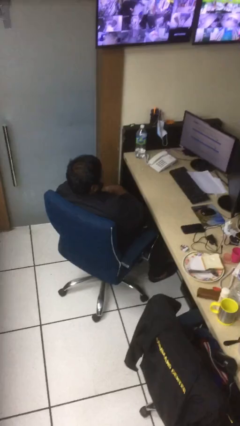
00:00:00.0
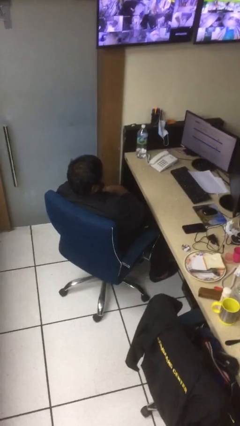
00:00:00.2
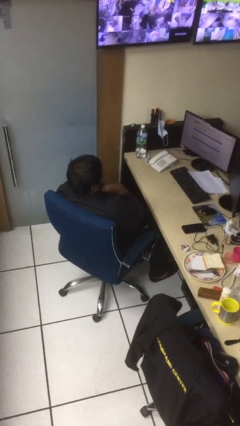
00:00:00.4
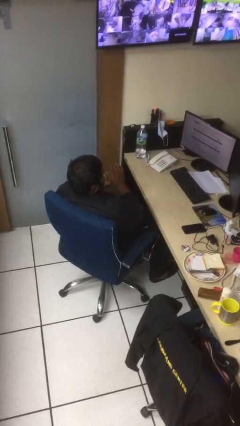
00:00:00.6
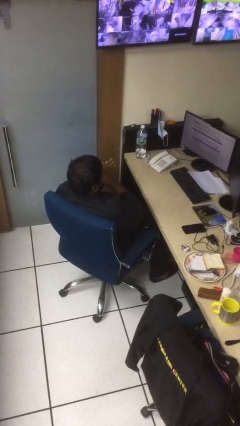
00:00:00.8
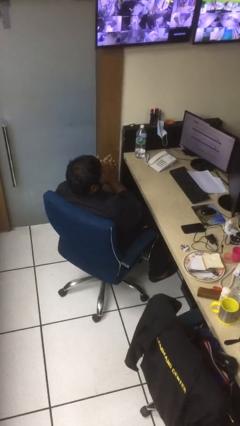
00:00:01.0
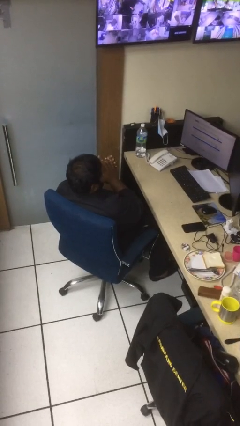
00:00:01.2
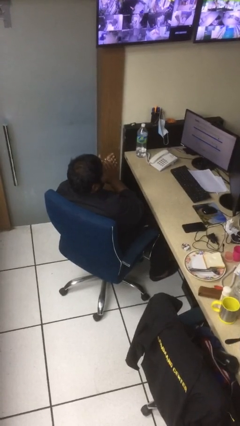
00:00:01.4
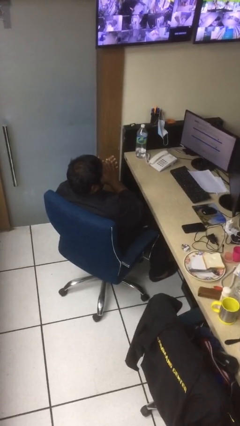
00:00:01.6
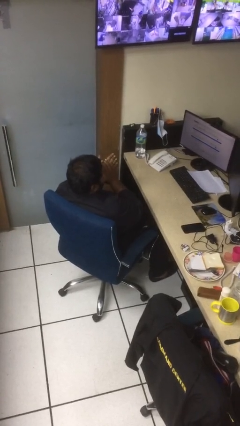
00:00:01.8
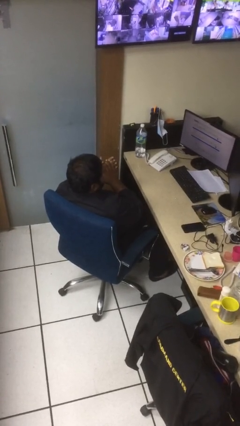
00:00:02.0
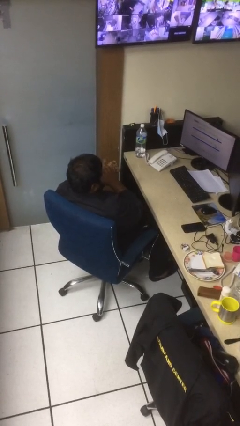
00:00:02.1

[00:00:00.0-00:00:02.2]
person claps hands

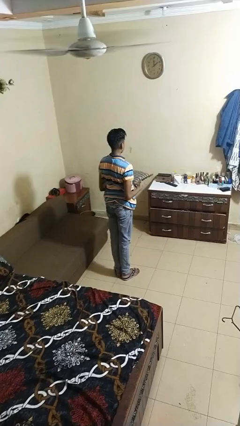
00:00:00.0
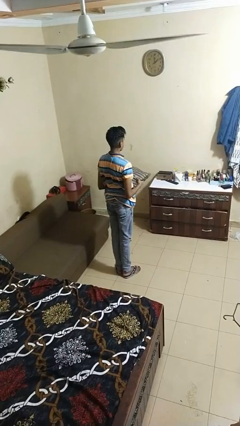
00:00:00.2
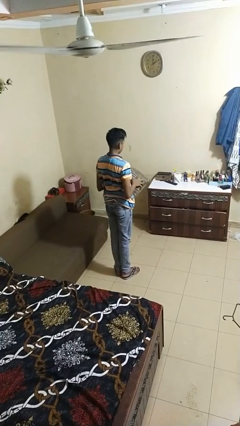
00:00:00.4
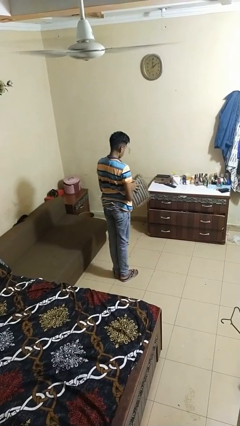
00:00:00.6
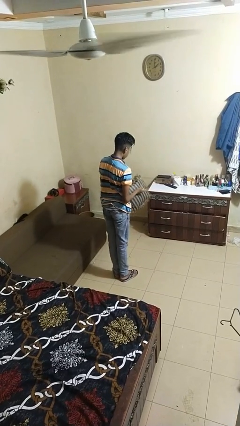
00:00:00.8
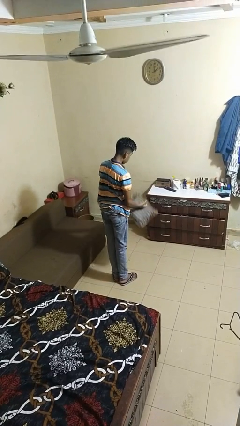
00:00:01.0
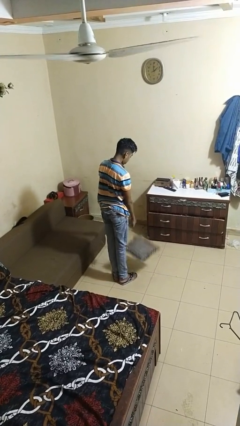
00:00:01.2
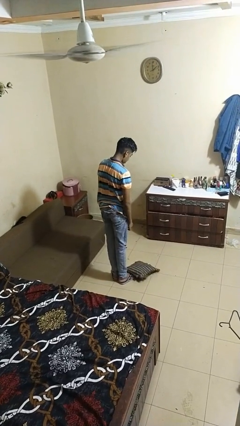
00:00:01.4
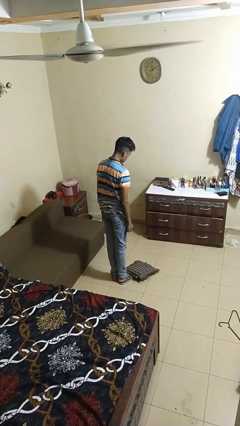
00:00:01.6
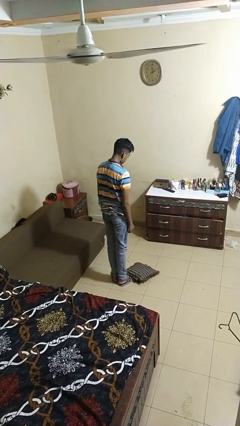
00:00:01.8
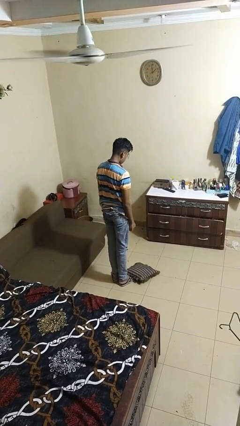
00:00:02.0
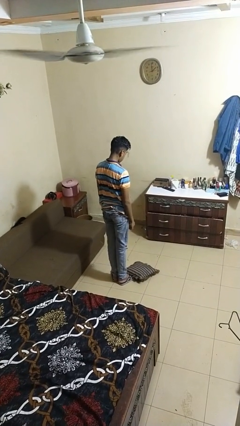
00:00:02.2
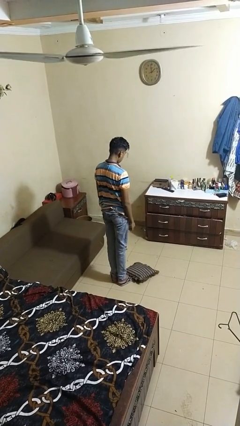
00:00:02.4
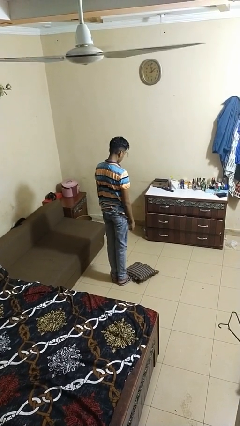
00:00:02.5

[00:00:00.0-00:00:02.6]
person drops object

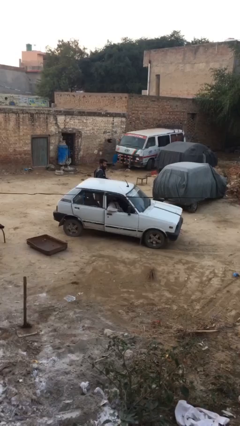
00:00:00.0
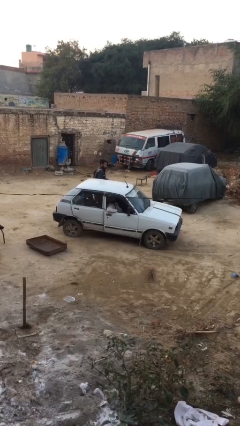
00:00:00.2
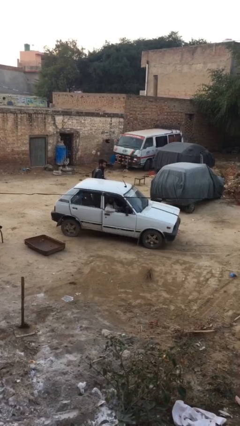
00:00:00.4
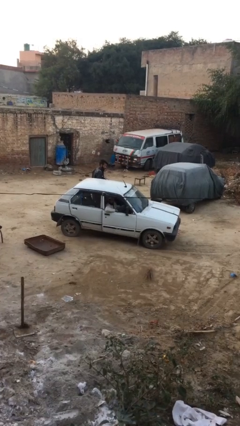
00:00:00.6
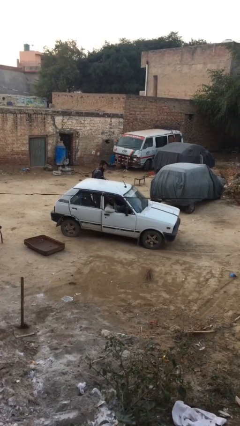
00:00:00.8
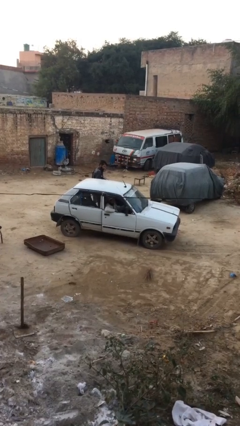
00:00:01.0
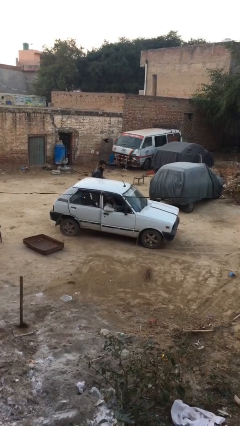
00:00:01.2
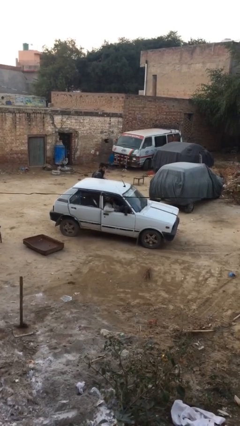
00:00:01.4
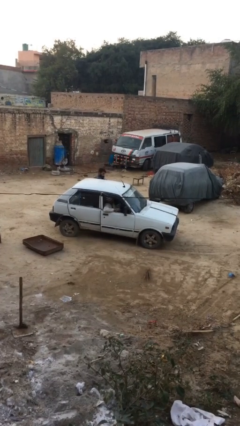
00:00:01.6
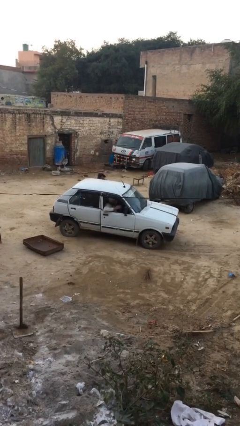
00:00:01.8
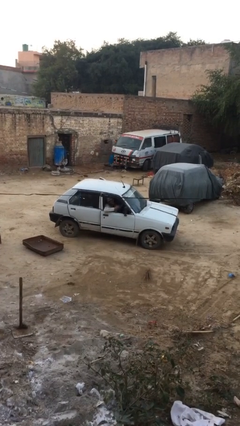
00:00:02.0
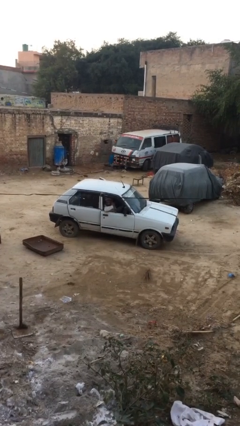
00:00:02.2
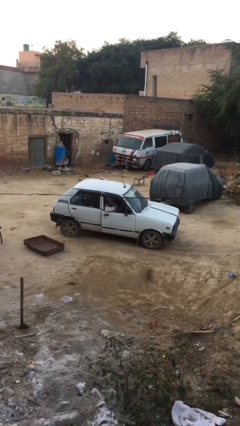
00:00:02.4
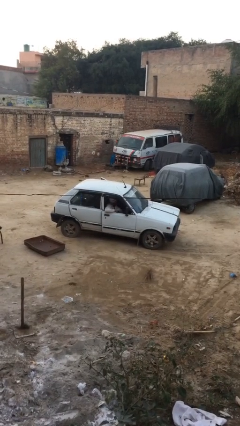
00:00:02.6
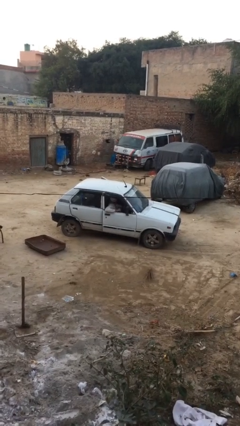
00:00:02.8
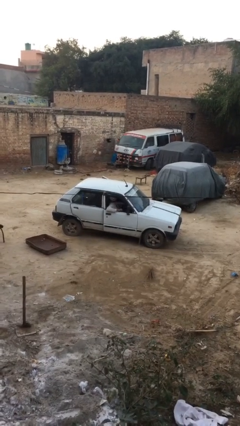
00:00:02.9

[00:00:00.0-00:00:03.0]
car picks up person

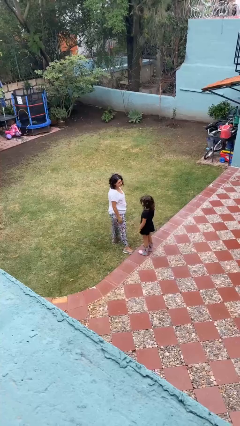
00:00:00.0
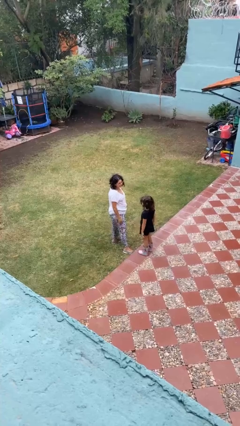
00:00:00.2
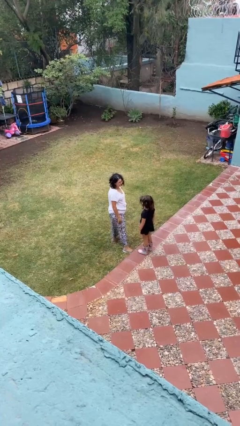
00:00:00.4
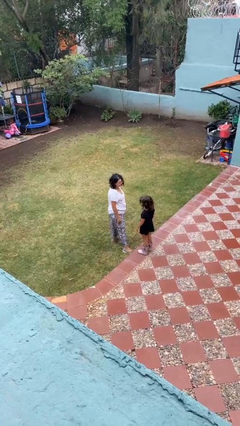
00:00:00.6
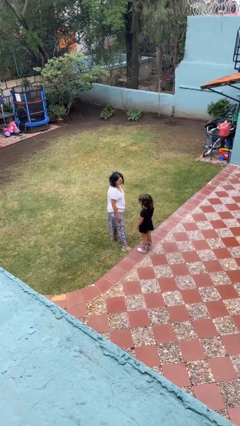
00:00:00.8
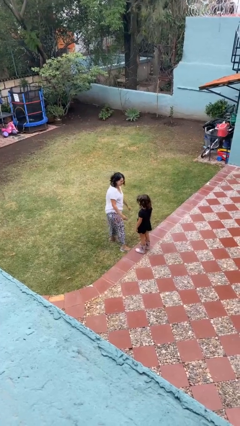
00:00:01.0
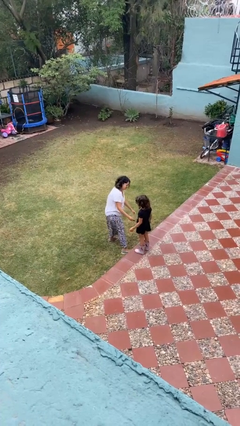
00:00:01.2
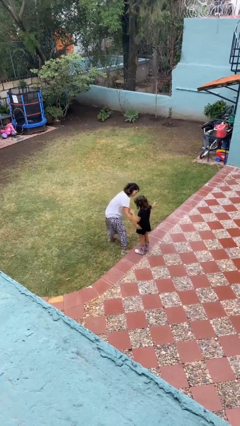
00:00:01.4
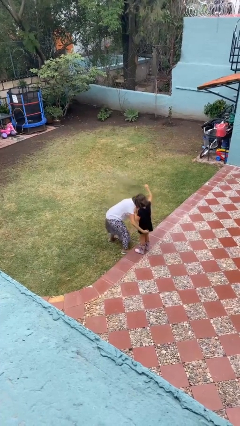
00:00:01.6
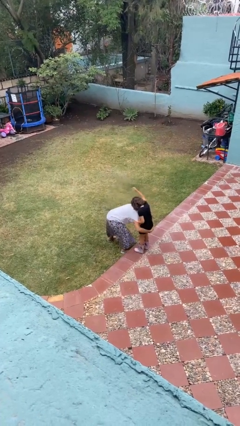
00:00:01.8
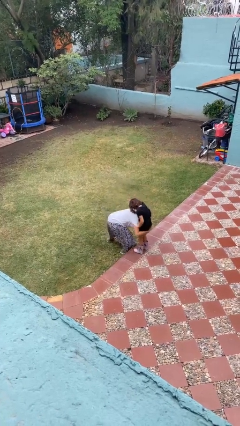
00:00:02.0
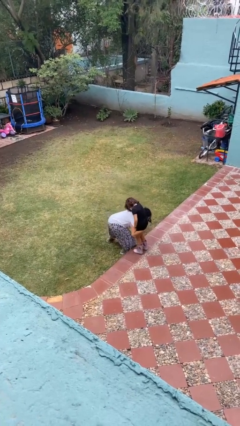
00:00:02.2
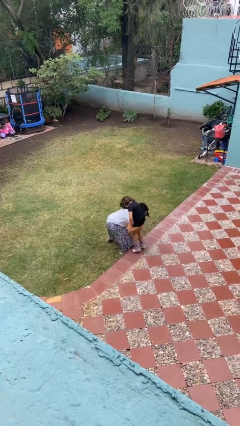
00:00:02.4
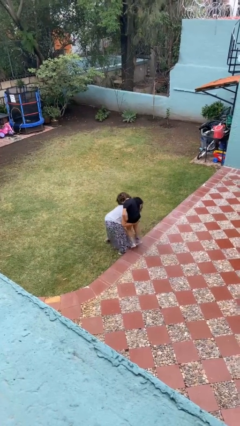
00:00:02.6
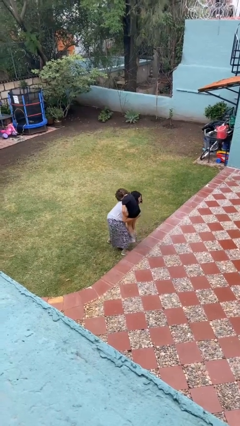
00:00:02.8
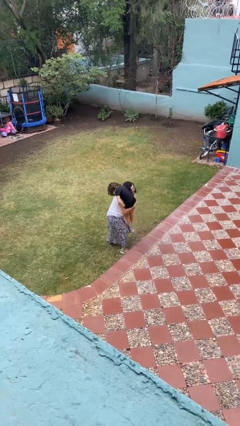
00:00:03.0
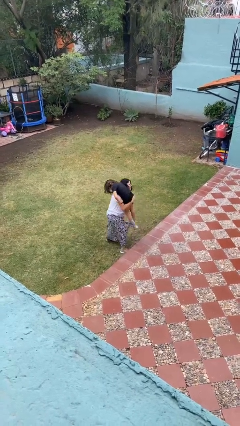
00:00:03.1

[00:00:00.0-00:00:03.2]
person carries person over shoulder

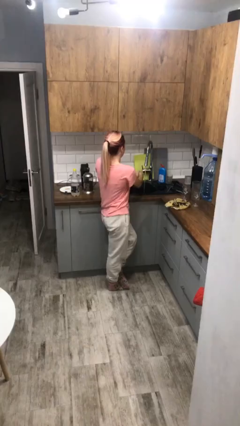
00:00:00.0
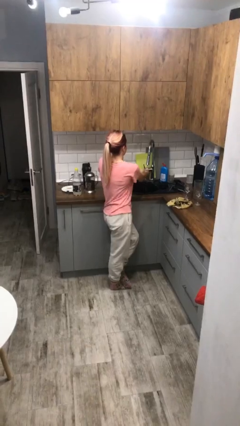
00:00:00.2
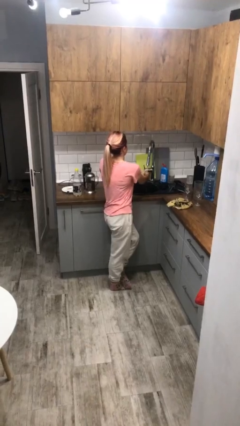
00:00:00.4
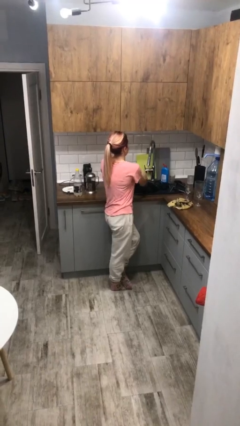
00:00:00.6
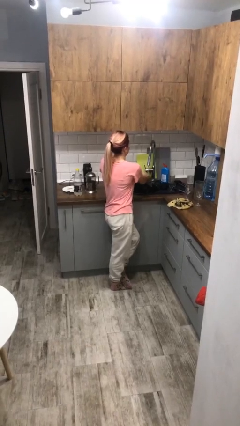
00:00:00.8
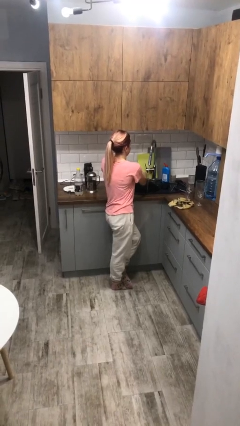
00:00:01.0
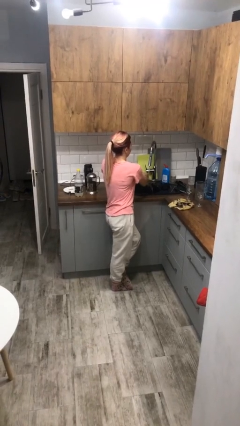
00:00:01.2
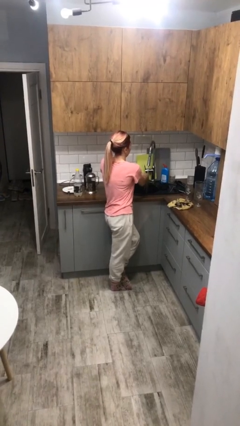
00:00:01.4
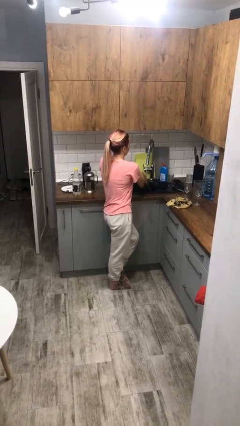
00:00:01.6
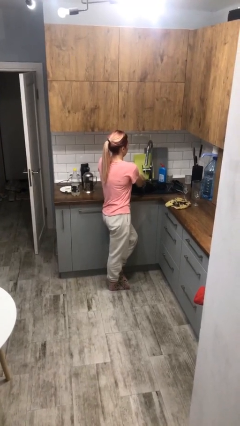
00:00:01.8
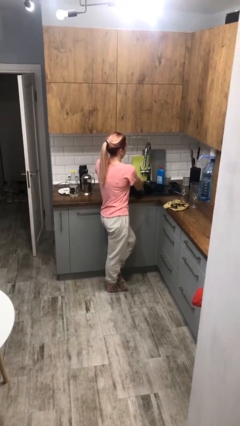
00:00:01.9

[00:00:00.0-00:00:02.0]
person washes hands

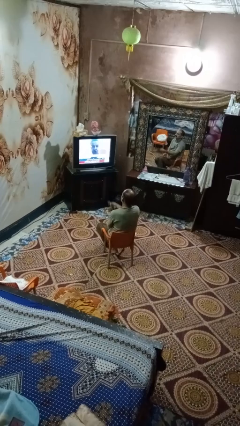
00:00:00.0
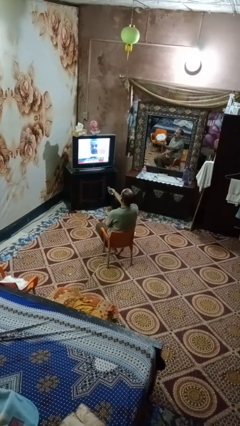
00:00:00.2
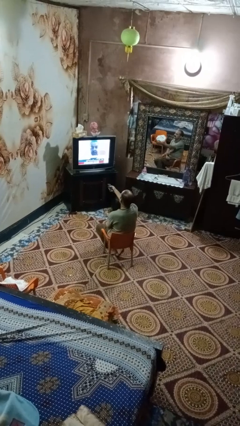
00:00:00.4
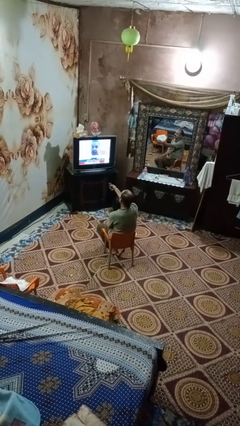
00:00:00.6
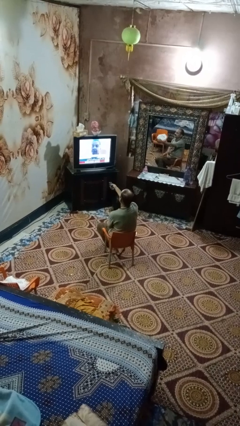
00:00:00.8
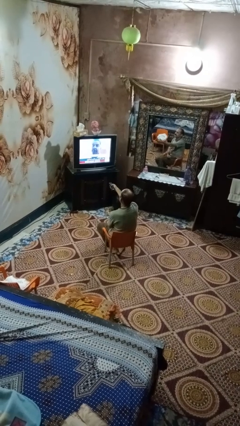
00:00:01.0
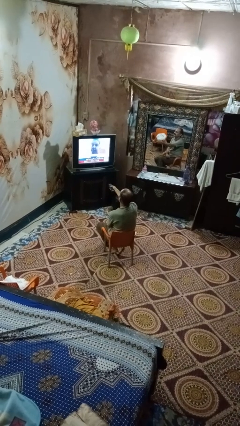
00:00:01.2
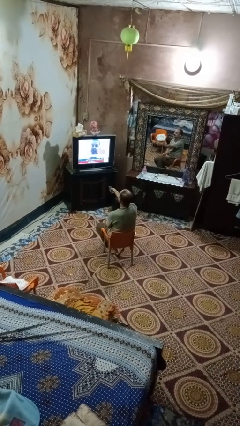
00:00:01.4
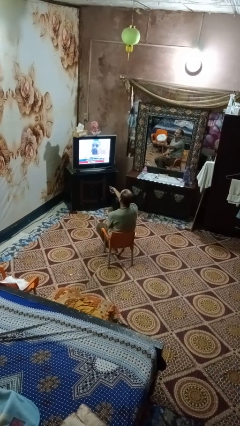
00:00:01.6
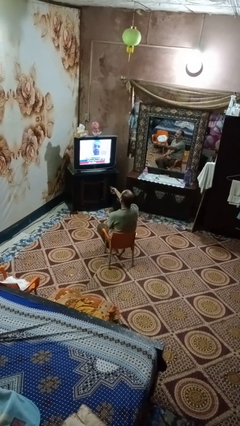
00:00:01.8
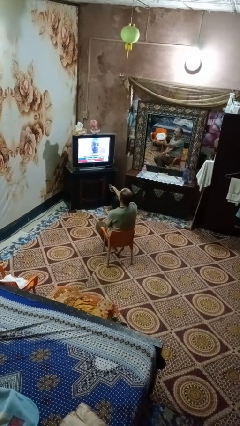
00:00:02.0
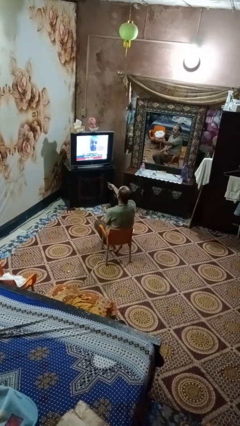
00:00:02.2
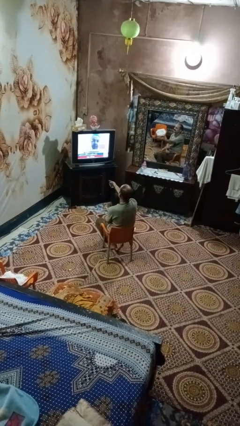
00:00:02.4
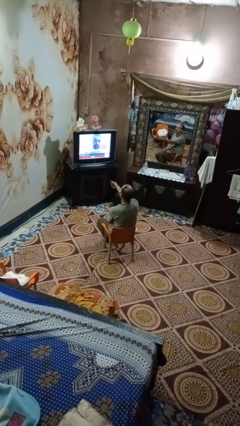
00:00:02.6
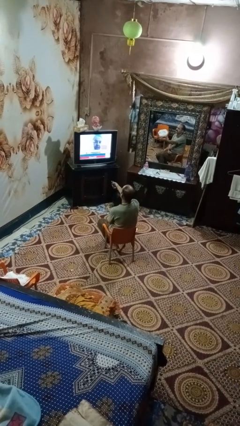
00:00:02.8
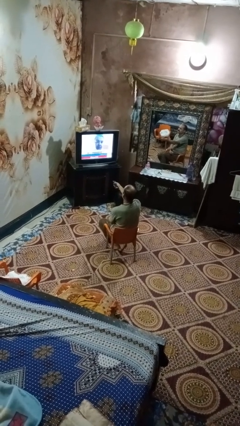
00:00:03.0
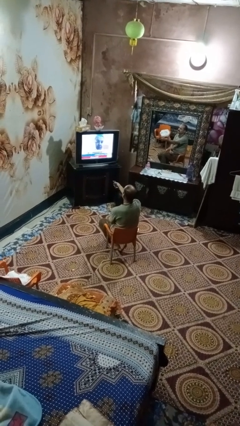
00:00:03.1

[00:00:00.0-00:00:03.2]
person uses television remote

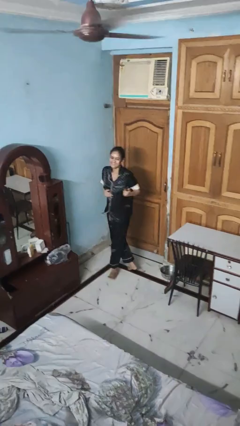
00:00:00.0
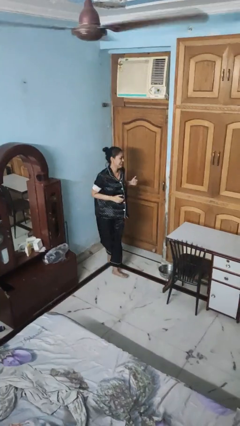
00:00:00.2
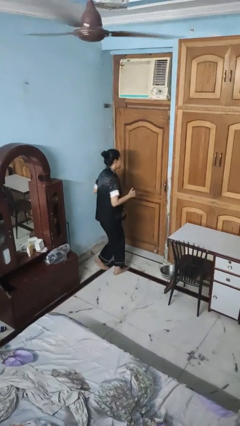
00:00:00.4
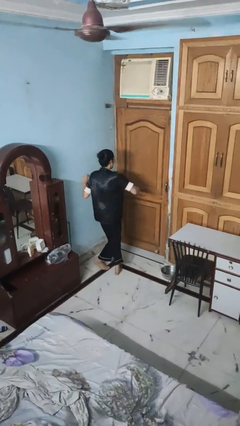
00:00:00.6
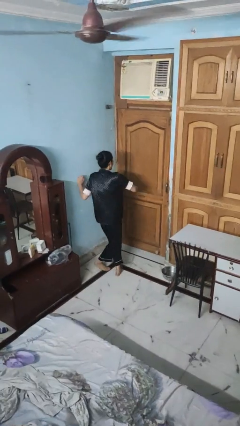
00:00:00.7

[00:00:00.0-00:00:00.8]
person twirls
